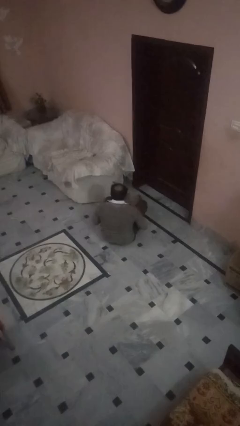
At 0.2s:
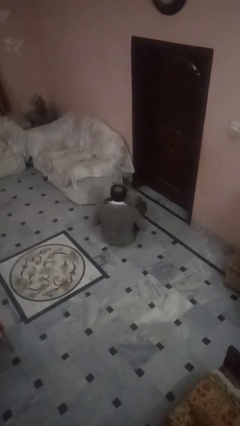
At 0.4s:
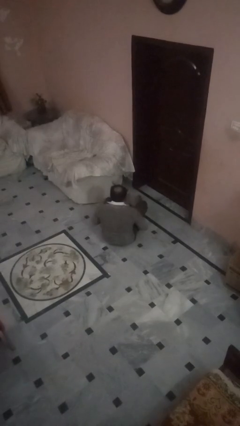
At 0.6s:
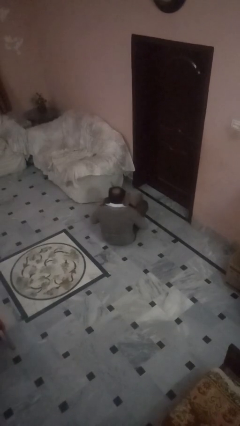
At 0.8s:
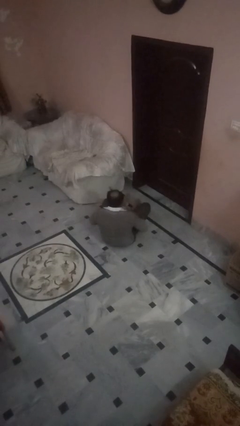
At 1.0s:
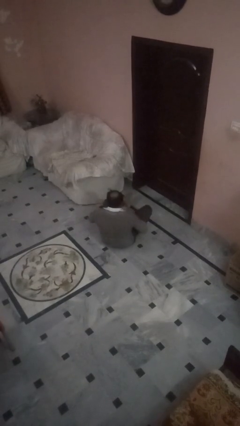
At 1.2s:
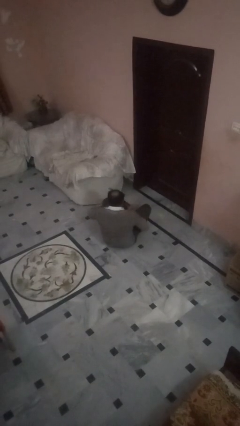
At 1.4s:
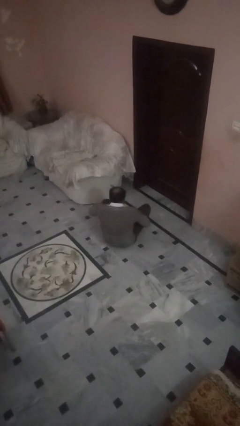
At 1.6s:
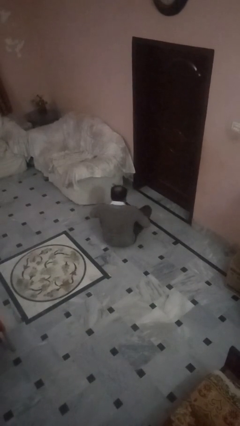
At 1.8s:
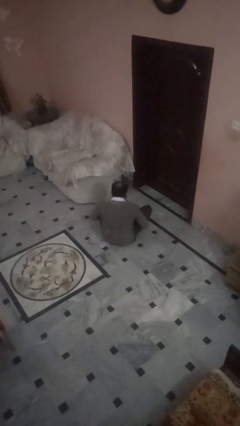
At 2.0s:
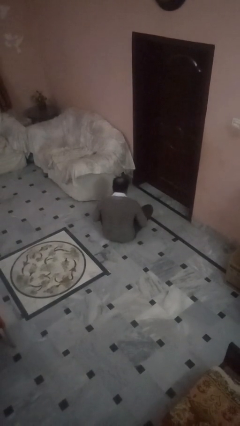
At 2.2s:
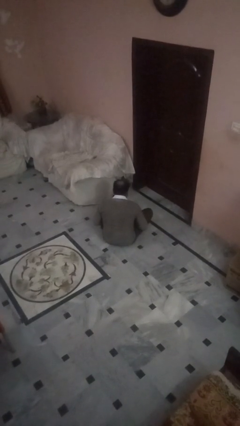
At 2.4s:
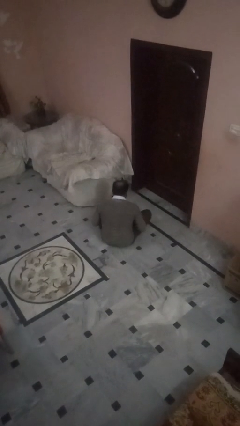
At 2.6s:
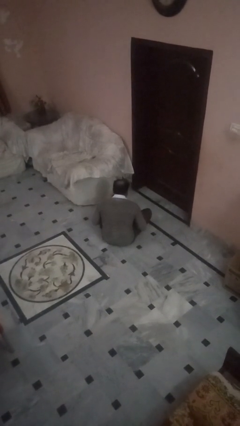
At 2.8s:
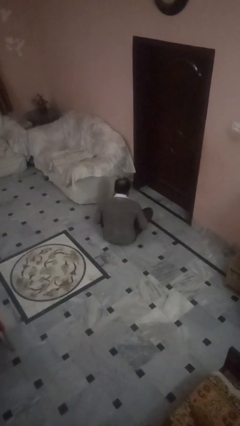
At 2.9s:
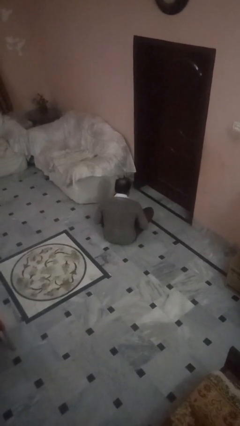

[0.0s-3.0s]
person crosses legs

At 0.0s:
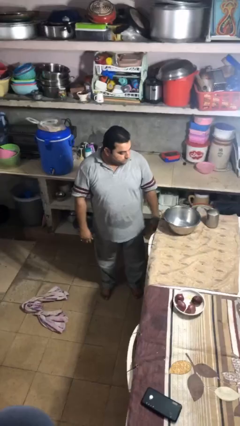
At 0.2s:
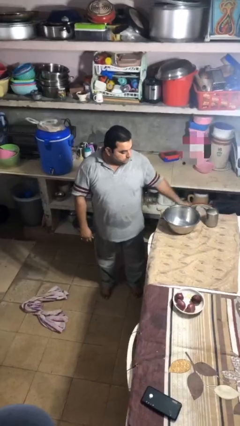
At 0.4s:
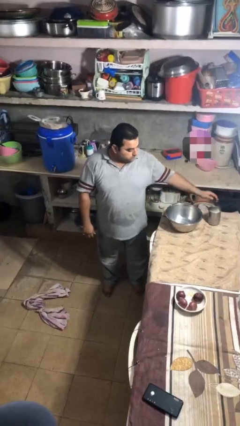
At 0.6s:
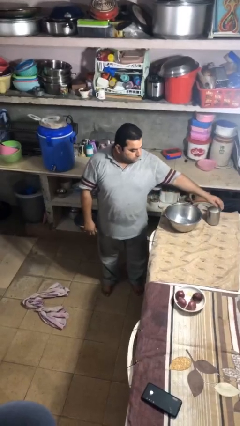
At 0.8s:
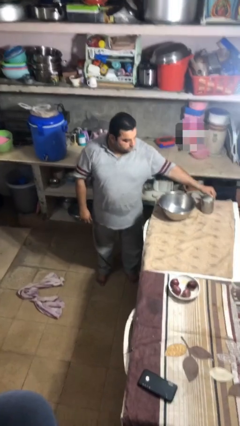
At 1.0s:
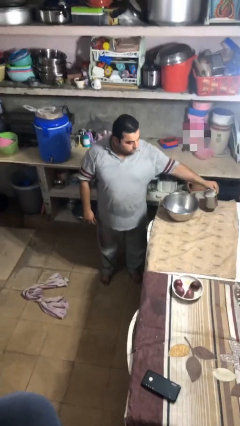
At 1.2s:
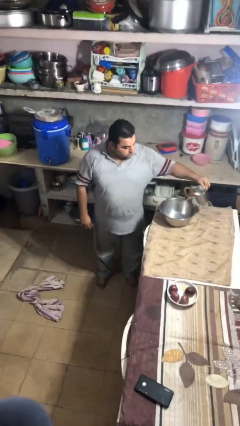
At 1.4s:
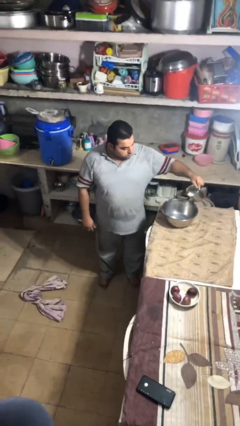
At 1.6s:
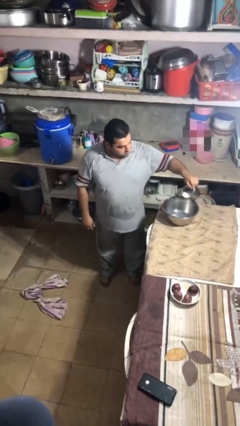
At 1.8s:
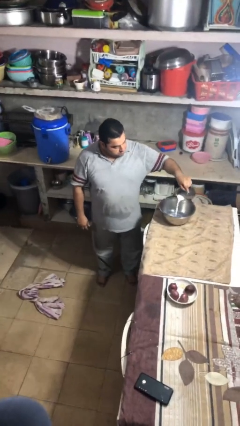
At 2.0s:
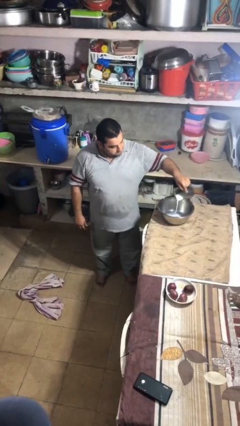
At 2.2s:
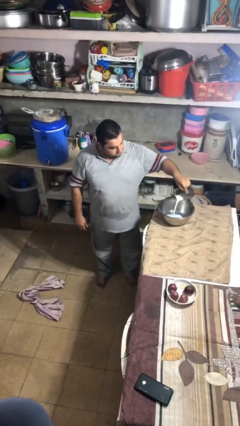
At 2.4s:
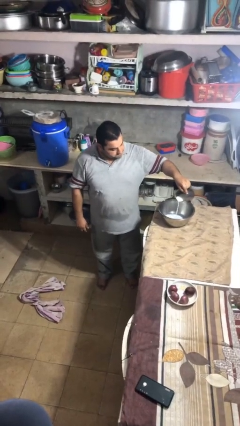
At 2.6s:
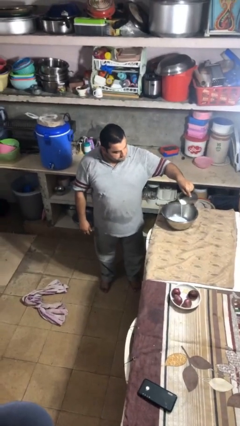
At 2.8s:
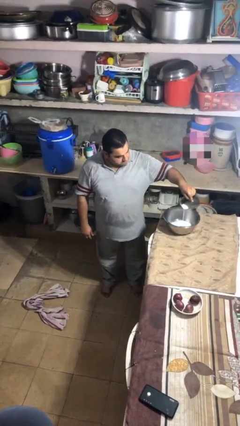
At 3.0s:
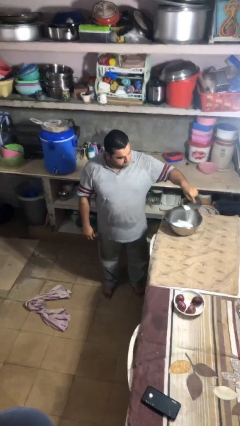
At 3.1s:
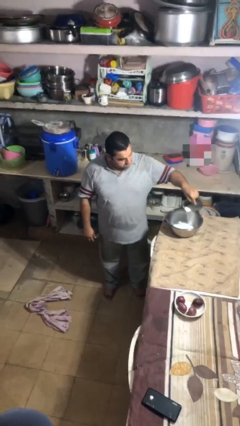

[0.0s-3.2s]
person pours into bowl

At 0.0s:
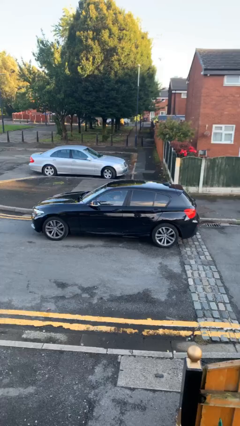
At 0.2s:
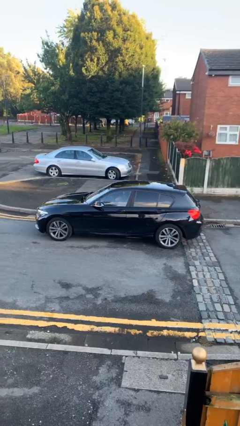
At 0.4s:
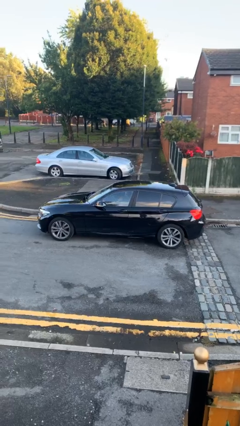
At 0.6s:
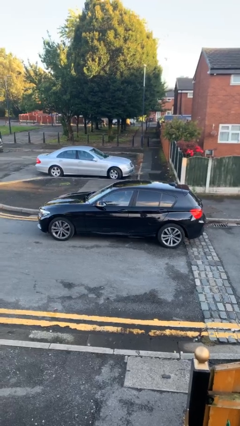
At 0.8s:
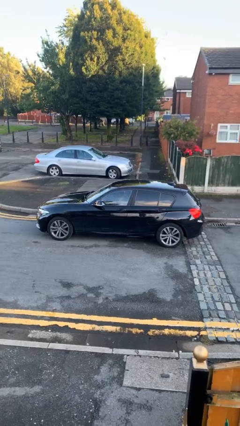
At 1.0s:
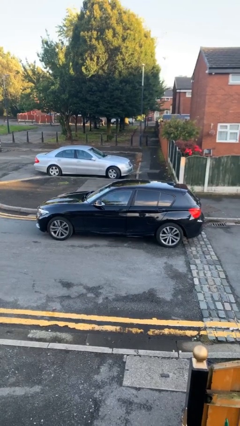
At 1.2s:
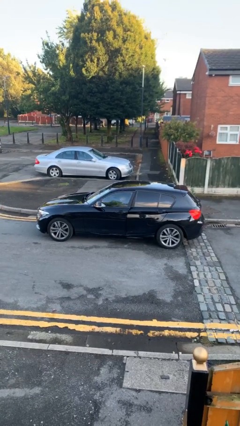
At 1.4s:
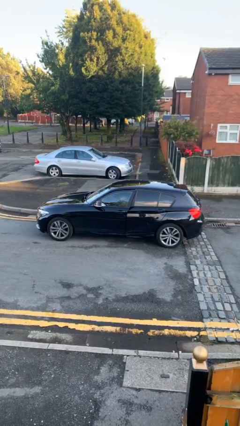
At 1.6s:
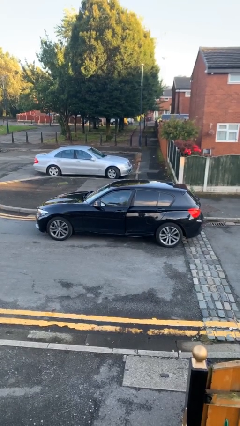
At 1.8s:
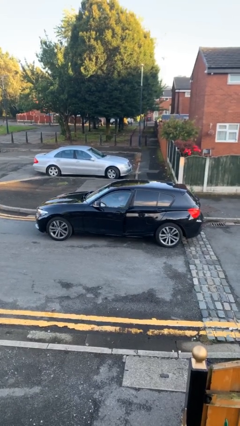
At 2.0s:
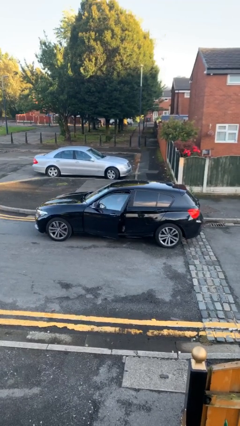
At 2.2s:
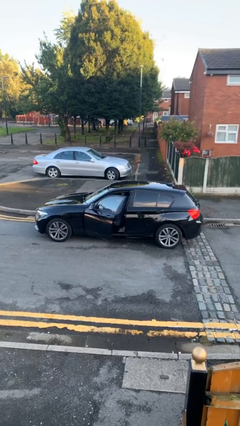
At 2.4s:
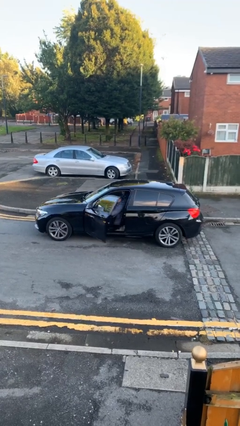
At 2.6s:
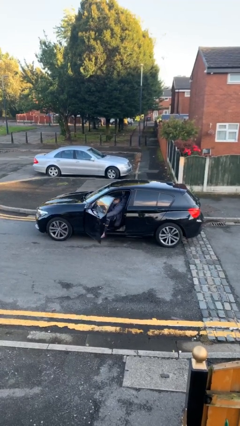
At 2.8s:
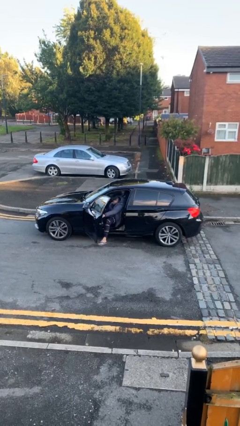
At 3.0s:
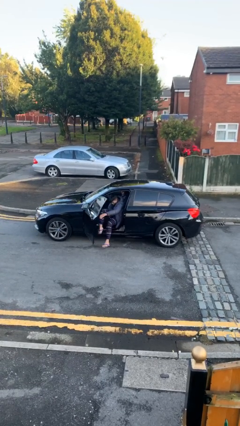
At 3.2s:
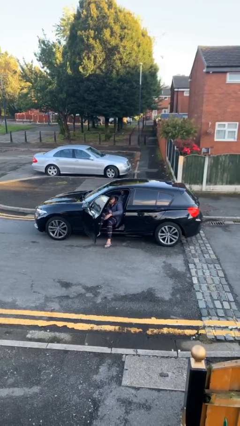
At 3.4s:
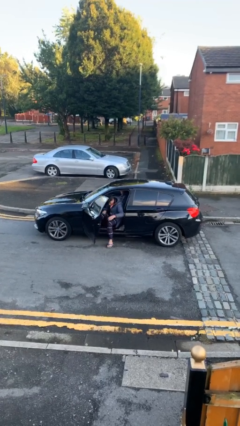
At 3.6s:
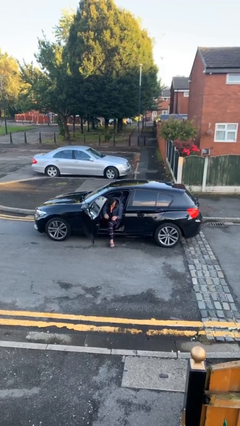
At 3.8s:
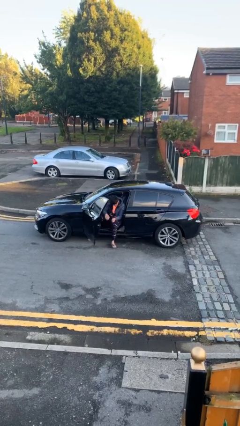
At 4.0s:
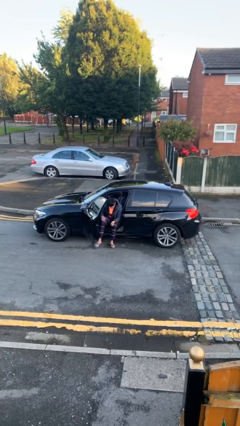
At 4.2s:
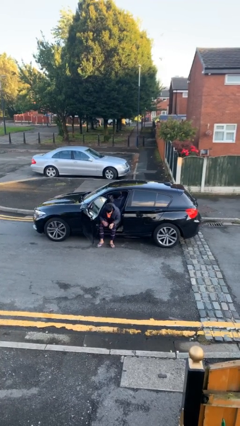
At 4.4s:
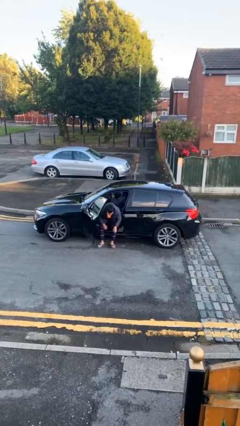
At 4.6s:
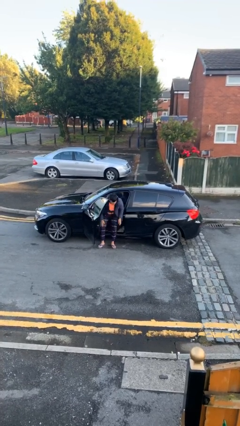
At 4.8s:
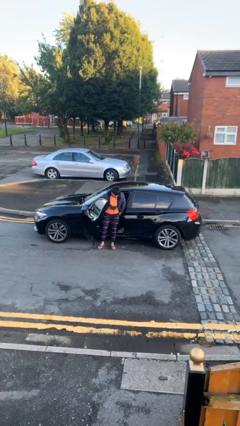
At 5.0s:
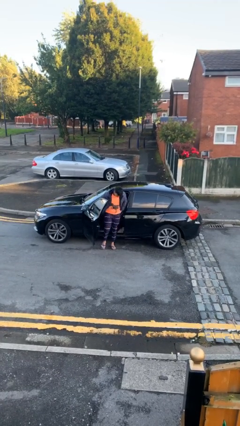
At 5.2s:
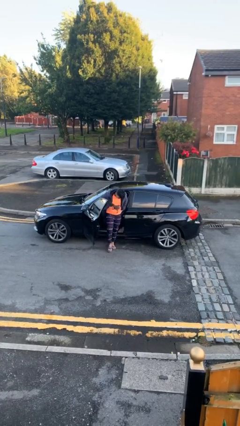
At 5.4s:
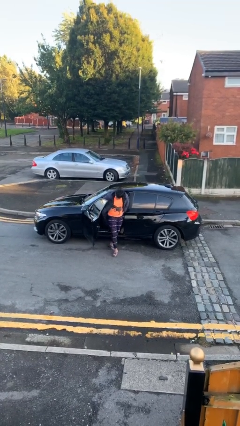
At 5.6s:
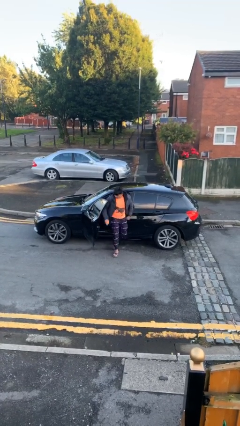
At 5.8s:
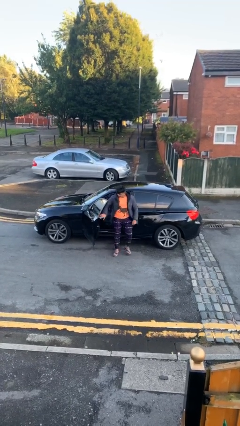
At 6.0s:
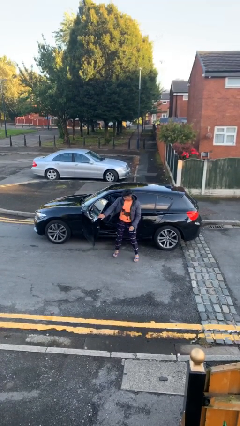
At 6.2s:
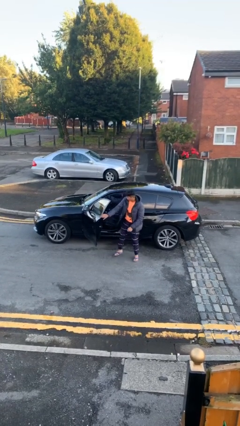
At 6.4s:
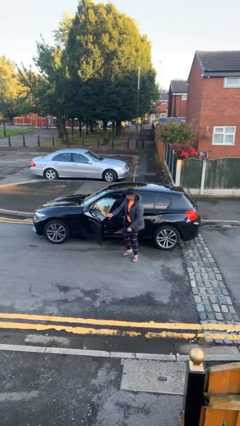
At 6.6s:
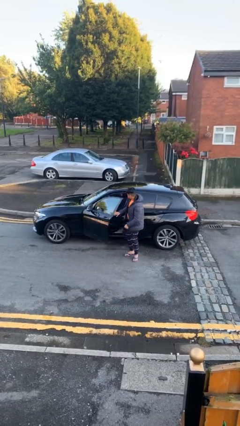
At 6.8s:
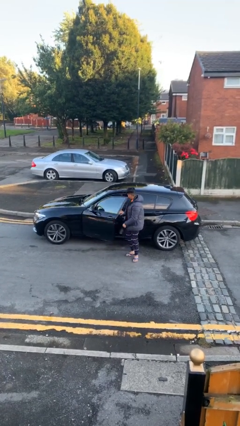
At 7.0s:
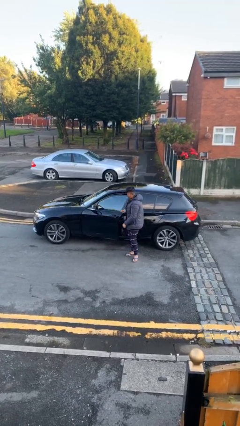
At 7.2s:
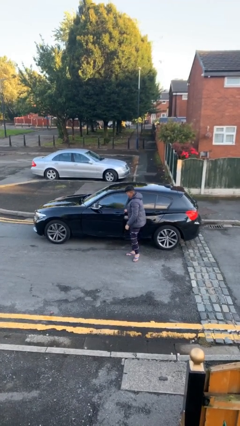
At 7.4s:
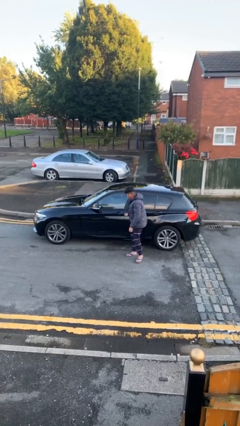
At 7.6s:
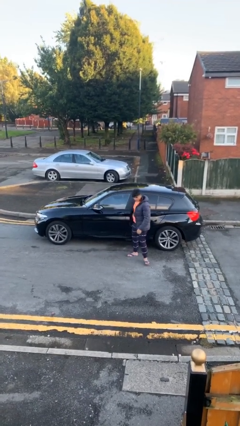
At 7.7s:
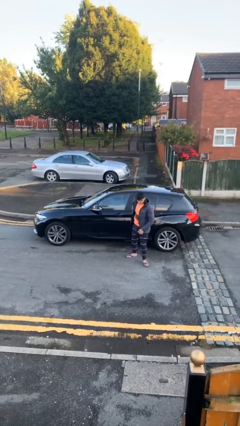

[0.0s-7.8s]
car drops off person

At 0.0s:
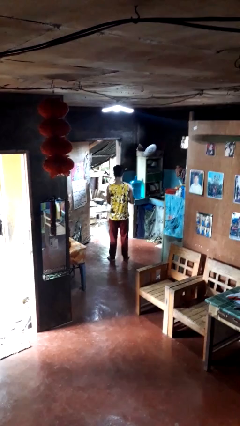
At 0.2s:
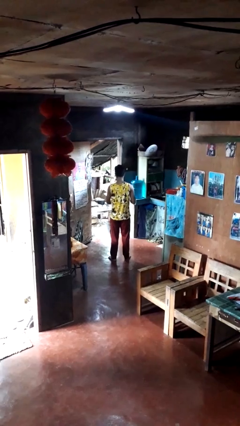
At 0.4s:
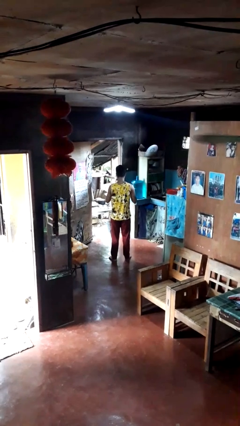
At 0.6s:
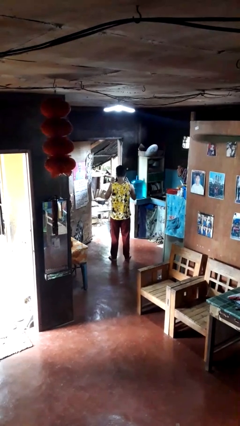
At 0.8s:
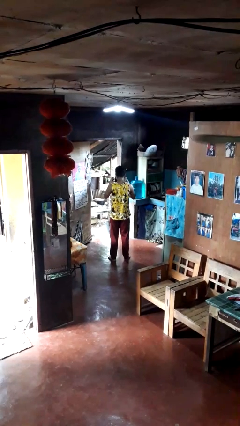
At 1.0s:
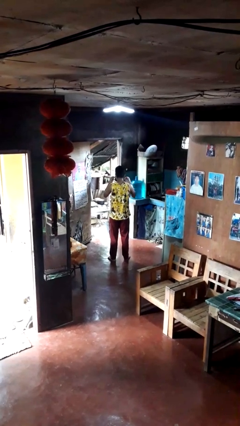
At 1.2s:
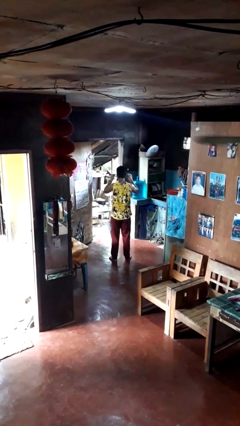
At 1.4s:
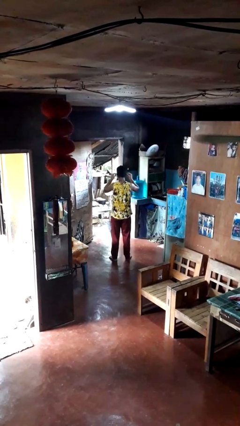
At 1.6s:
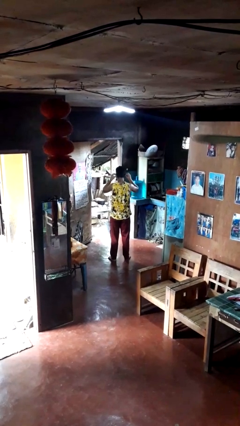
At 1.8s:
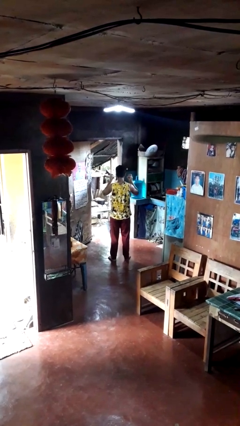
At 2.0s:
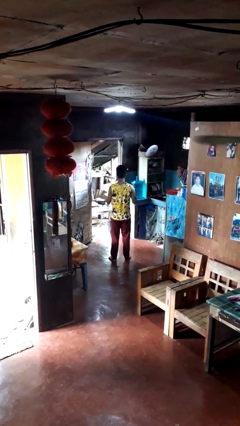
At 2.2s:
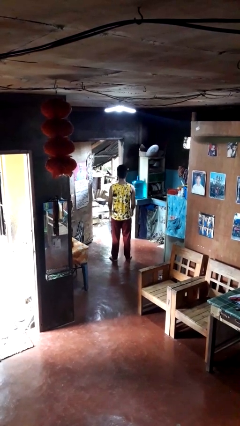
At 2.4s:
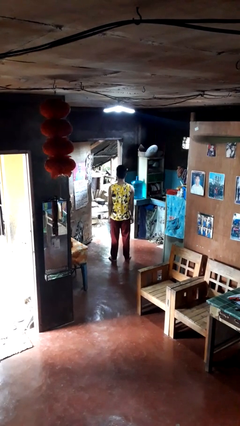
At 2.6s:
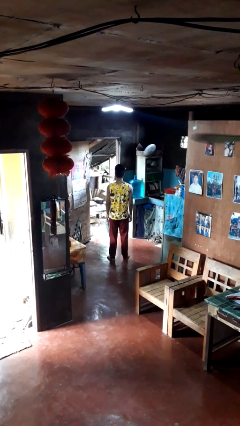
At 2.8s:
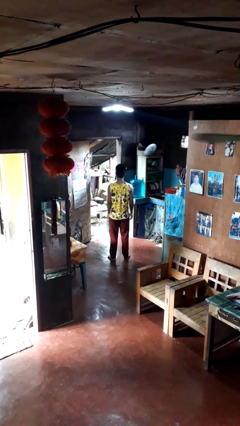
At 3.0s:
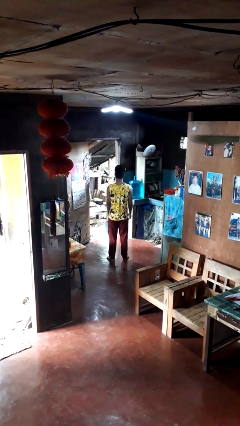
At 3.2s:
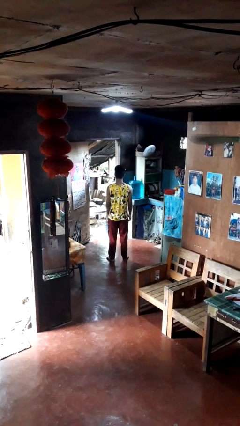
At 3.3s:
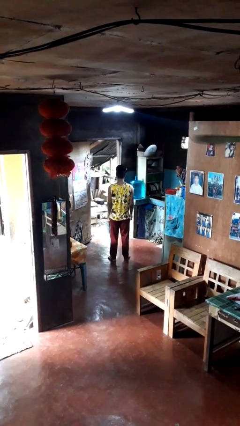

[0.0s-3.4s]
person puts on facemask

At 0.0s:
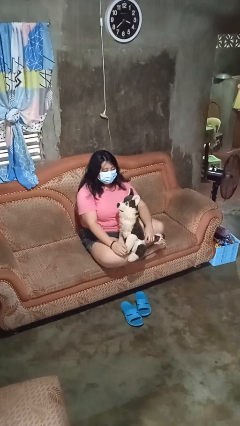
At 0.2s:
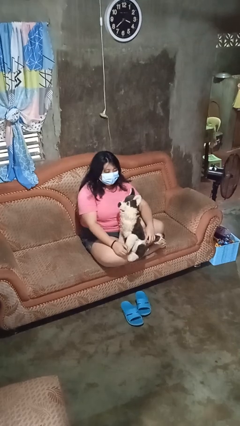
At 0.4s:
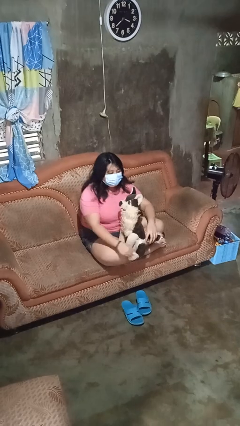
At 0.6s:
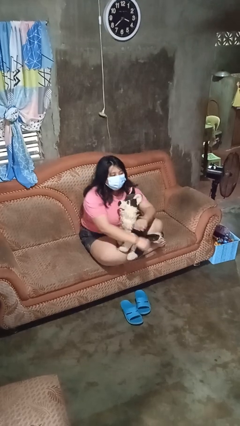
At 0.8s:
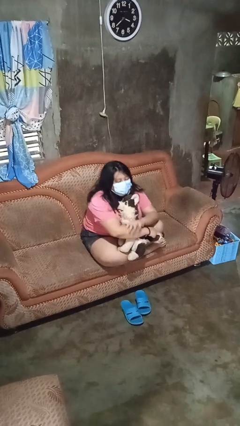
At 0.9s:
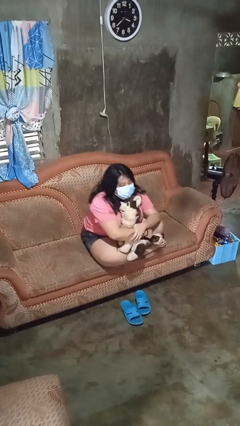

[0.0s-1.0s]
person hugs stuffed animal
